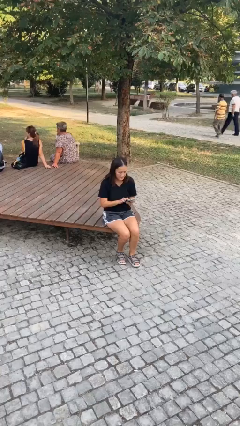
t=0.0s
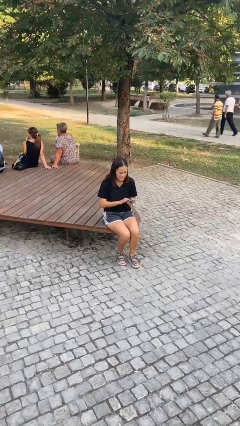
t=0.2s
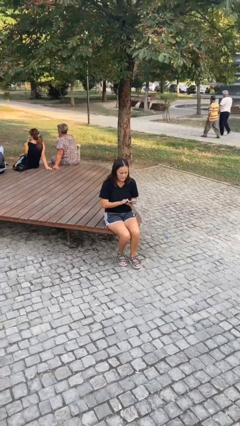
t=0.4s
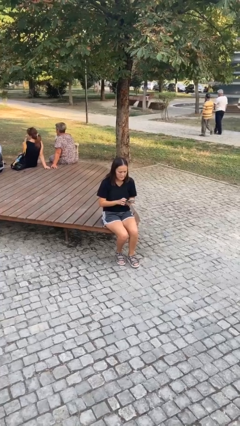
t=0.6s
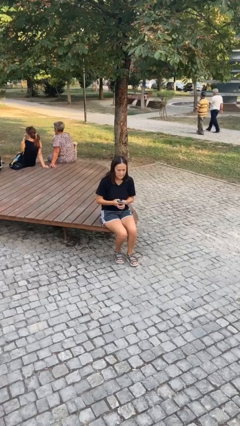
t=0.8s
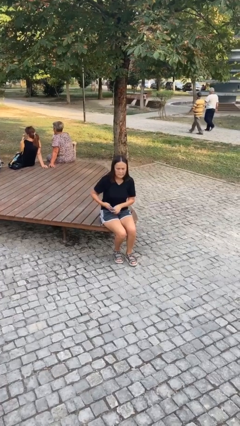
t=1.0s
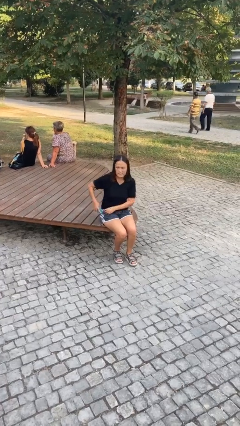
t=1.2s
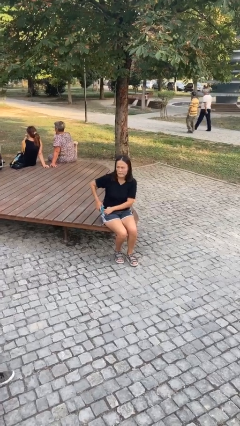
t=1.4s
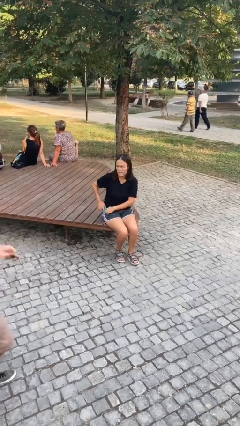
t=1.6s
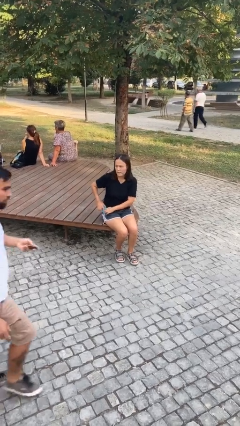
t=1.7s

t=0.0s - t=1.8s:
person puts phone into pocket

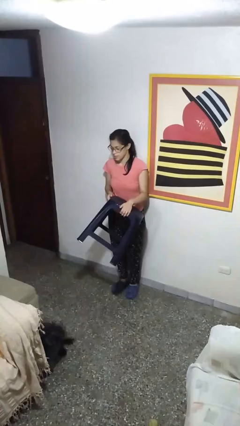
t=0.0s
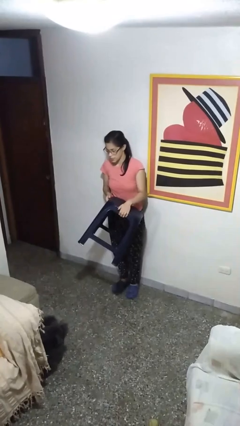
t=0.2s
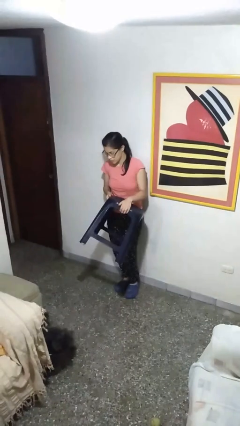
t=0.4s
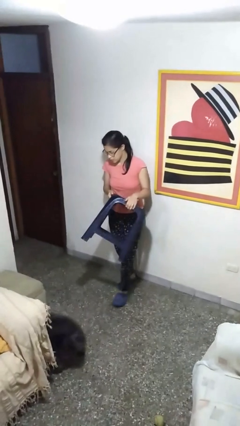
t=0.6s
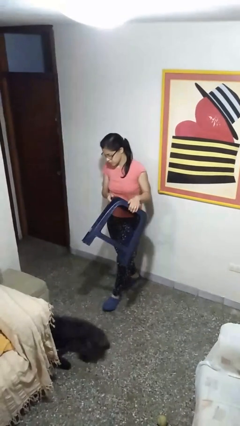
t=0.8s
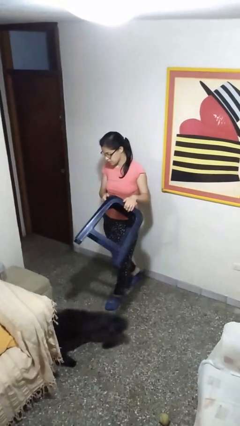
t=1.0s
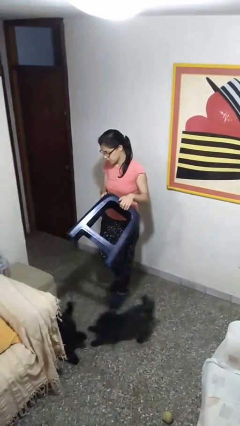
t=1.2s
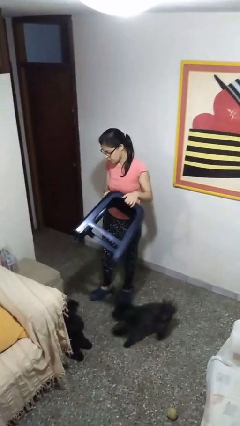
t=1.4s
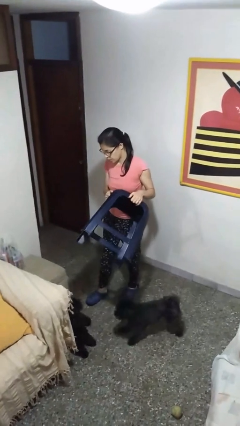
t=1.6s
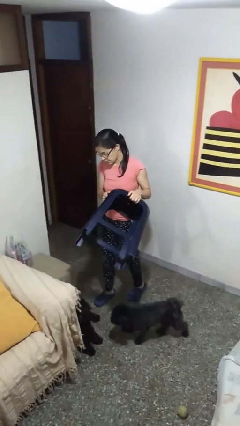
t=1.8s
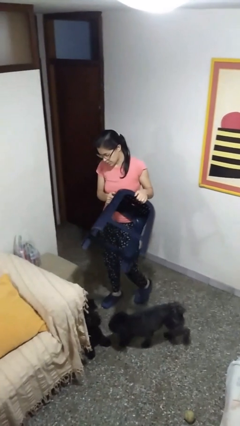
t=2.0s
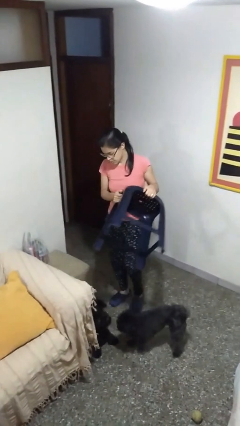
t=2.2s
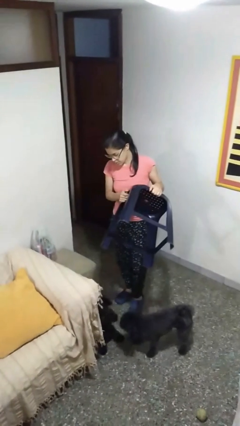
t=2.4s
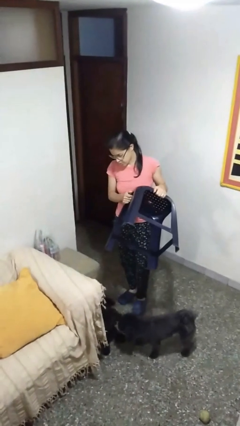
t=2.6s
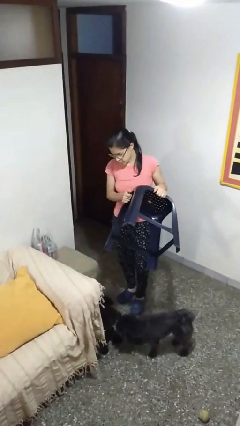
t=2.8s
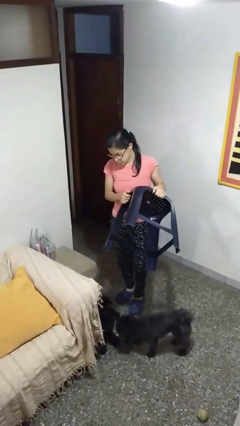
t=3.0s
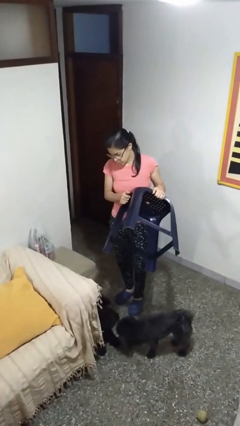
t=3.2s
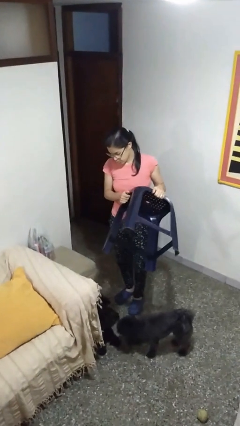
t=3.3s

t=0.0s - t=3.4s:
person carries furniture

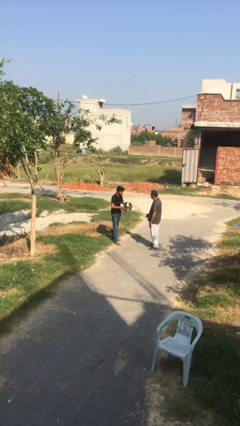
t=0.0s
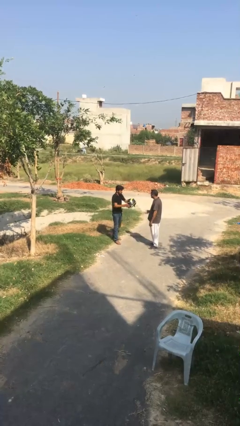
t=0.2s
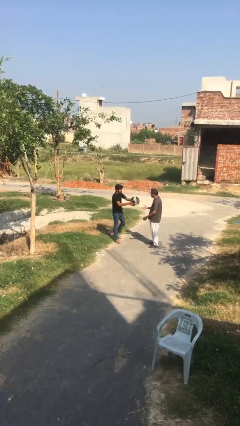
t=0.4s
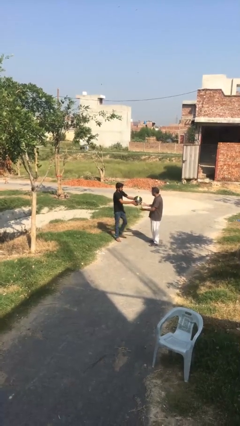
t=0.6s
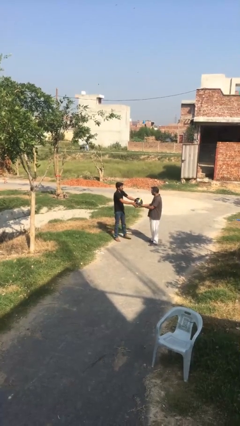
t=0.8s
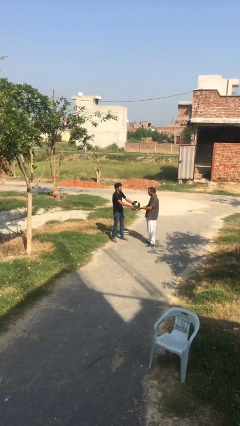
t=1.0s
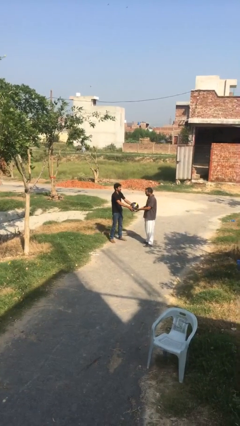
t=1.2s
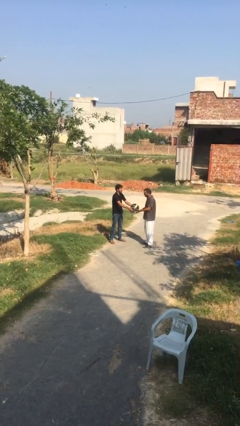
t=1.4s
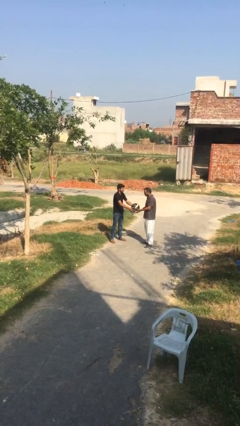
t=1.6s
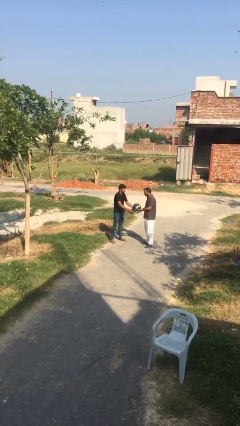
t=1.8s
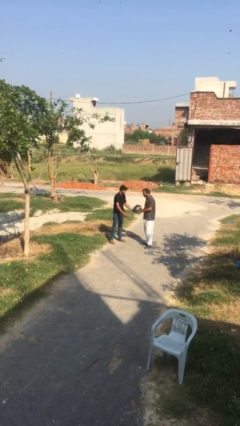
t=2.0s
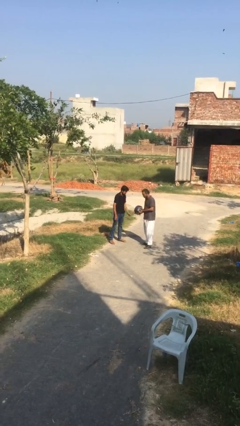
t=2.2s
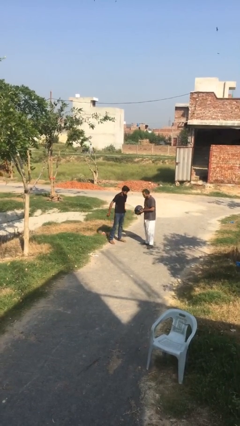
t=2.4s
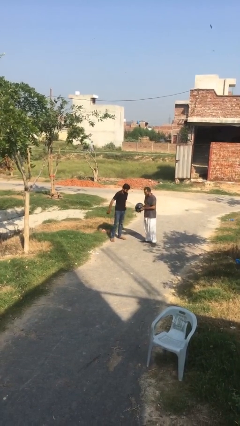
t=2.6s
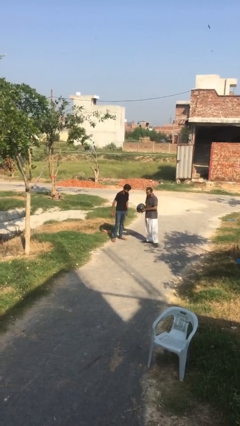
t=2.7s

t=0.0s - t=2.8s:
person transfers object to person

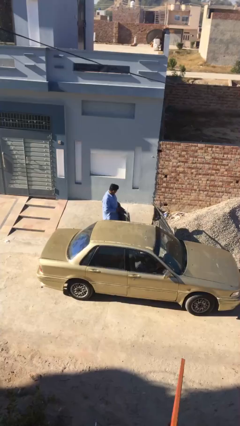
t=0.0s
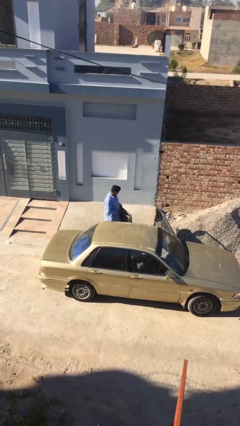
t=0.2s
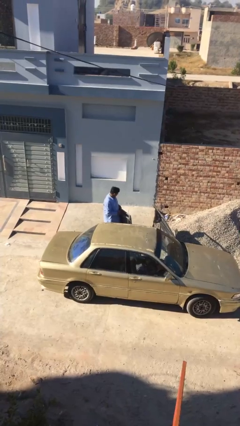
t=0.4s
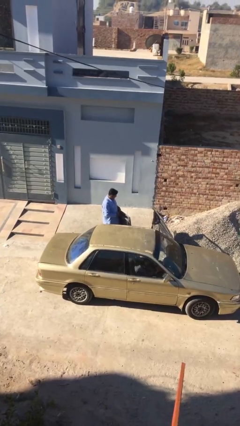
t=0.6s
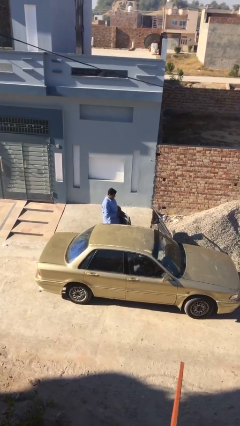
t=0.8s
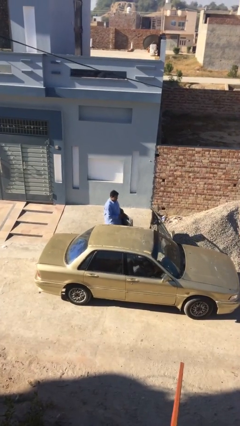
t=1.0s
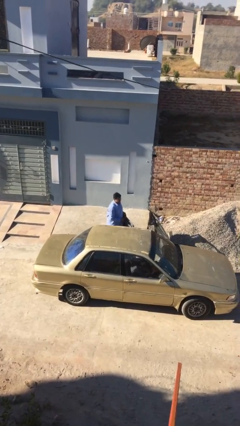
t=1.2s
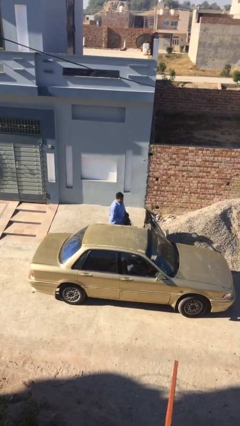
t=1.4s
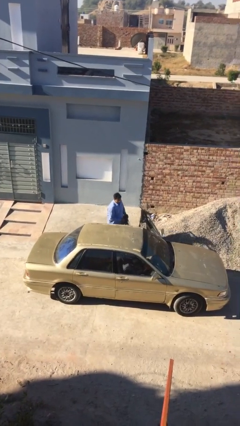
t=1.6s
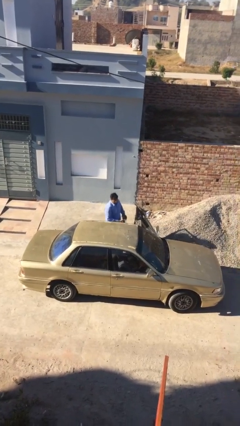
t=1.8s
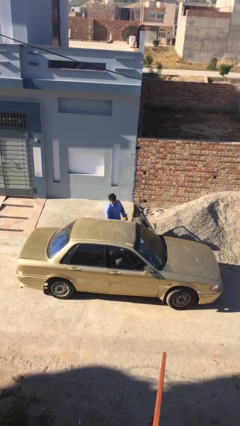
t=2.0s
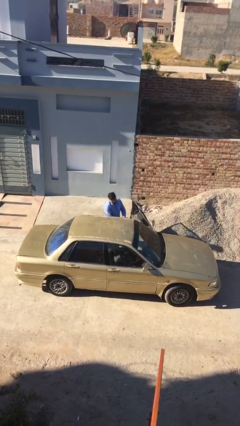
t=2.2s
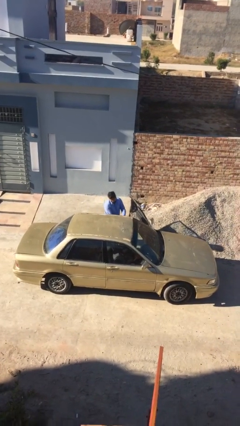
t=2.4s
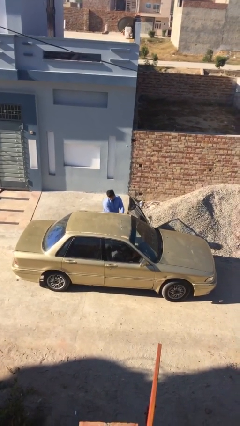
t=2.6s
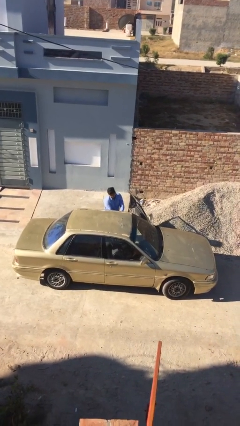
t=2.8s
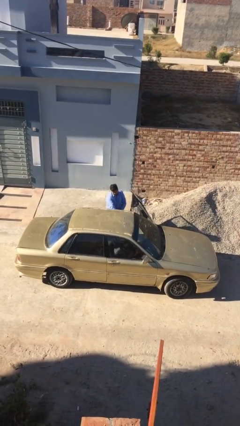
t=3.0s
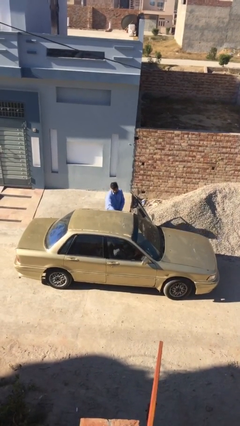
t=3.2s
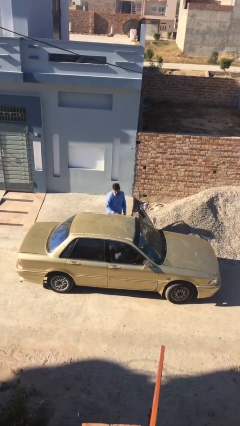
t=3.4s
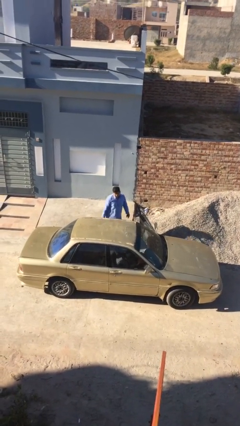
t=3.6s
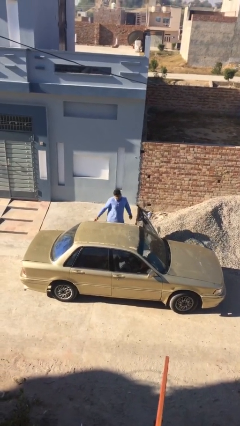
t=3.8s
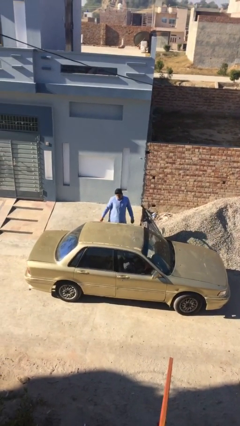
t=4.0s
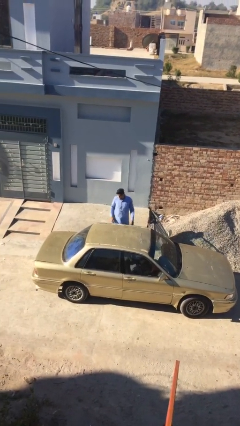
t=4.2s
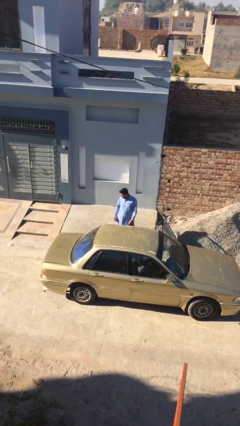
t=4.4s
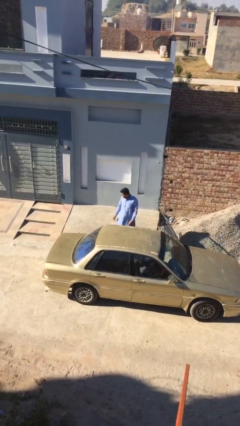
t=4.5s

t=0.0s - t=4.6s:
person loads car

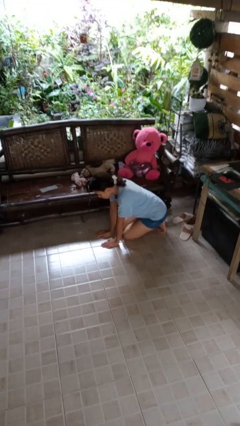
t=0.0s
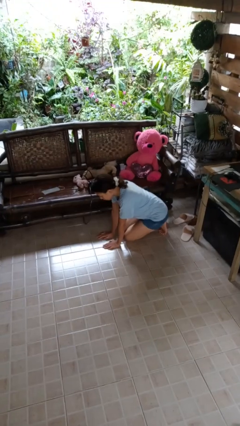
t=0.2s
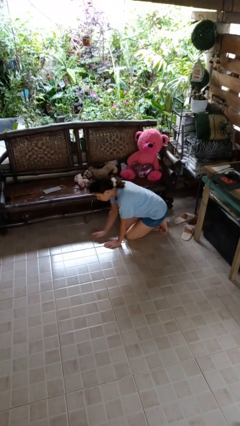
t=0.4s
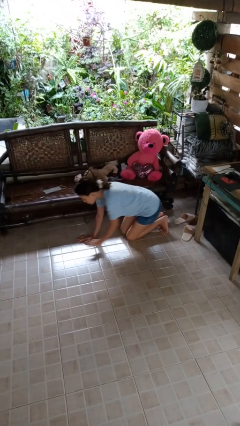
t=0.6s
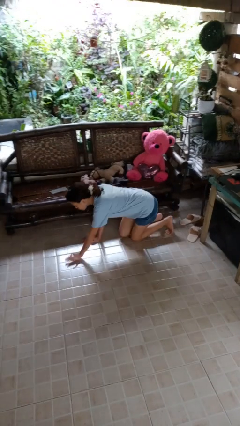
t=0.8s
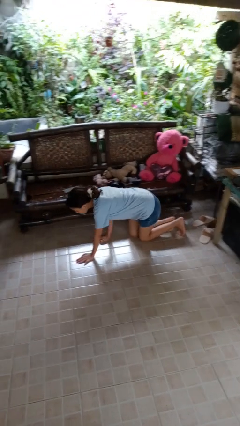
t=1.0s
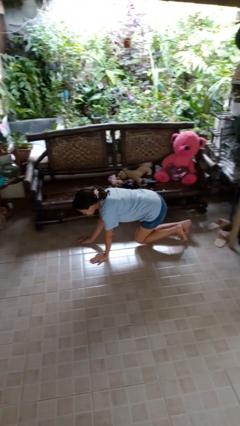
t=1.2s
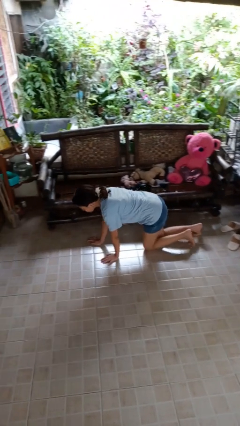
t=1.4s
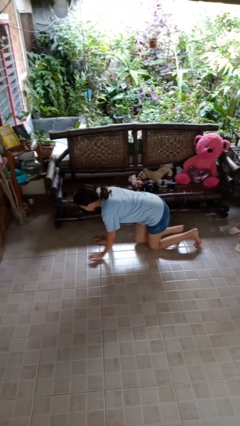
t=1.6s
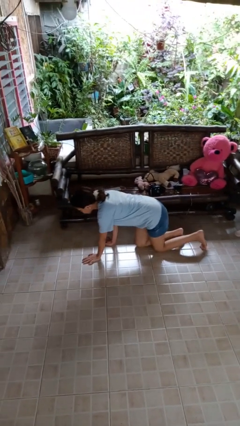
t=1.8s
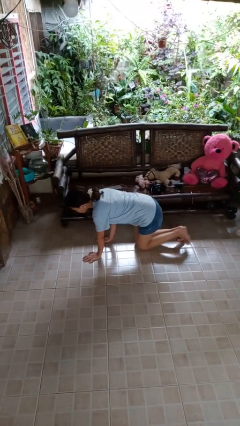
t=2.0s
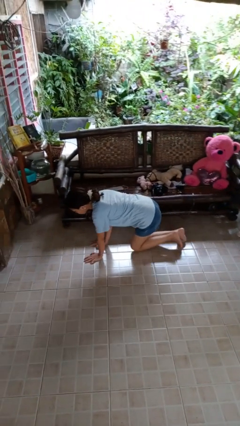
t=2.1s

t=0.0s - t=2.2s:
person crawls

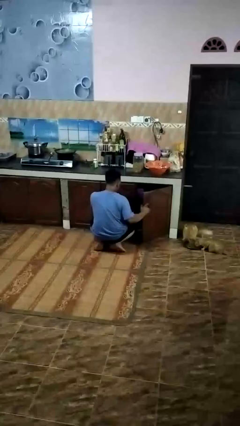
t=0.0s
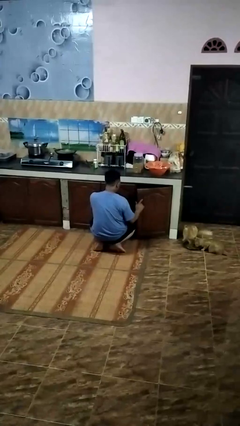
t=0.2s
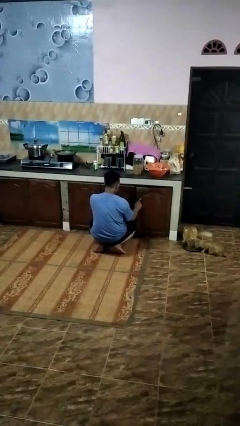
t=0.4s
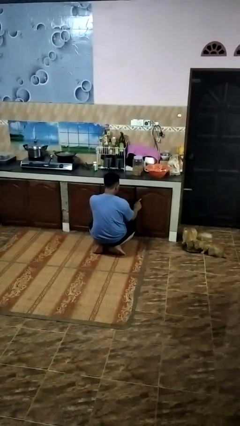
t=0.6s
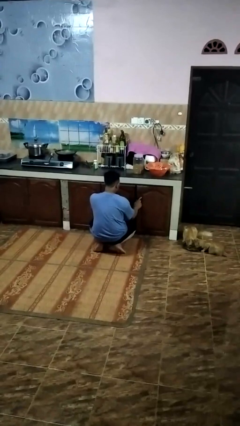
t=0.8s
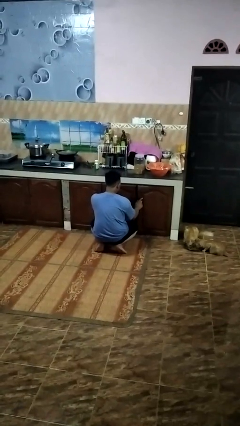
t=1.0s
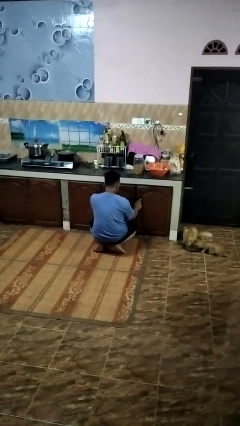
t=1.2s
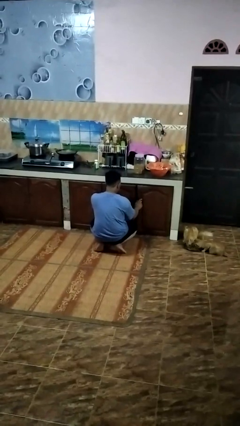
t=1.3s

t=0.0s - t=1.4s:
person closes kitchen drawer

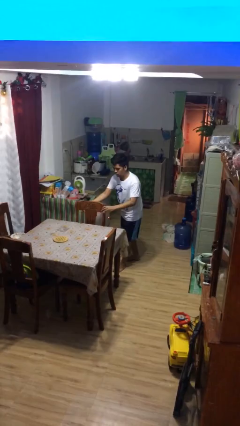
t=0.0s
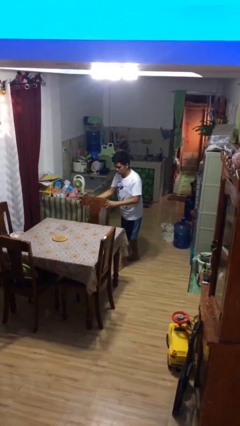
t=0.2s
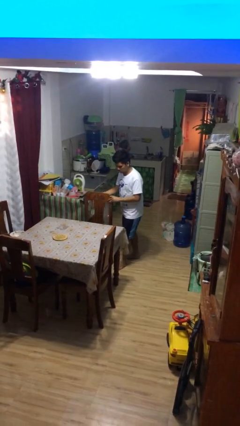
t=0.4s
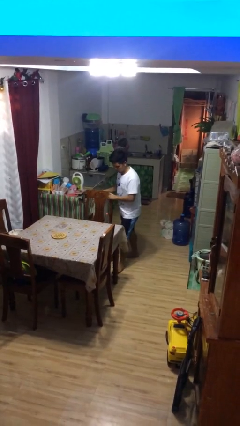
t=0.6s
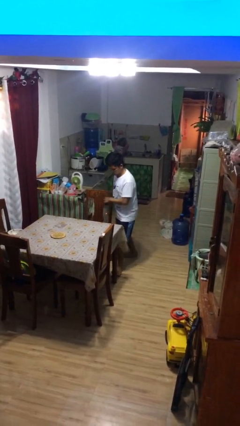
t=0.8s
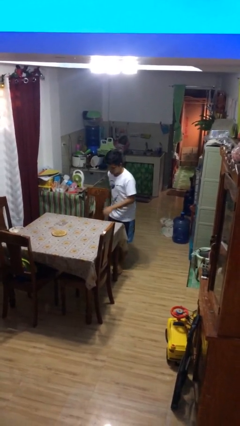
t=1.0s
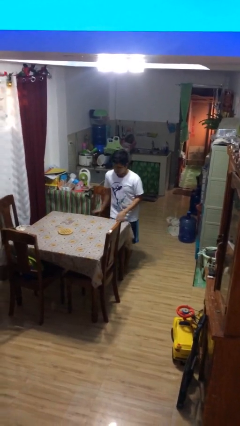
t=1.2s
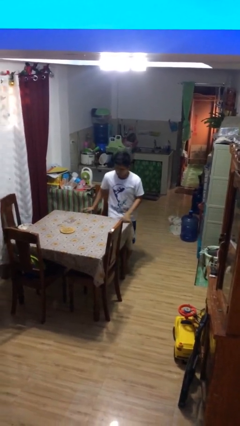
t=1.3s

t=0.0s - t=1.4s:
person stands up
